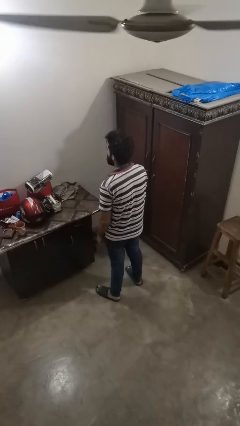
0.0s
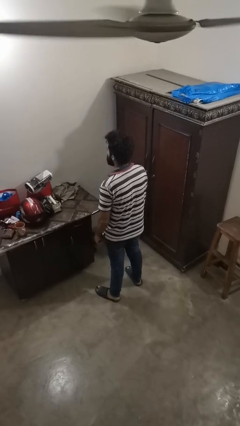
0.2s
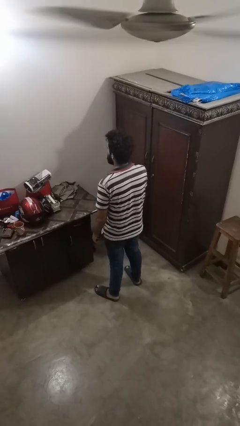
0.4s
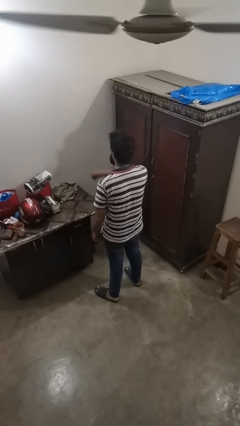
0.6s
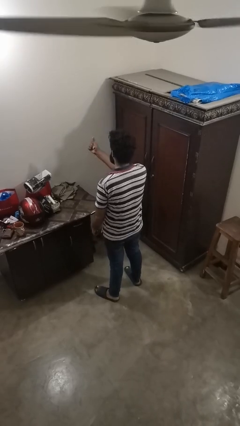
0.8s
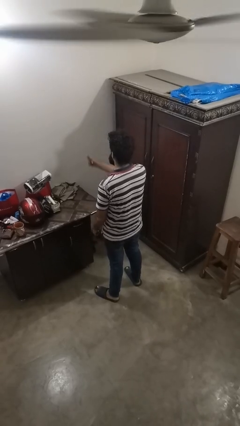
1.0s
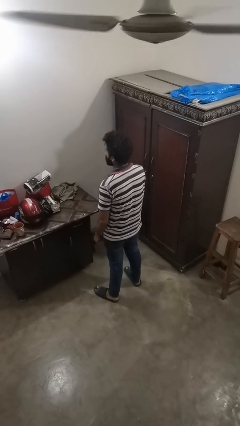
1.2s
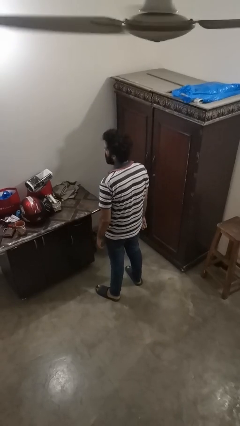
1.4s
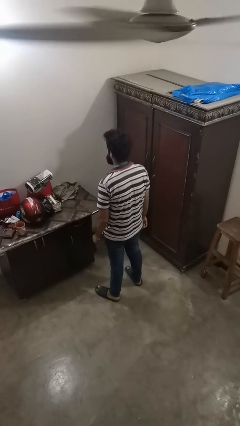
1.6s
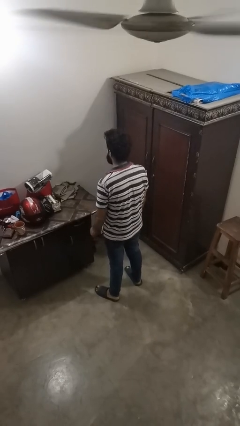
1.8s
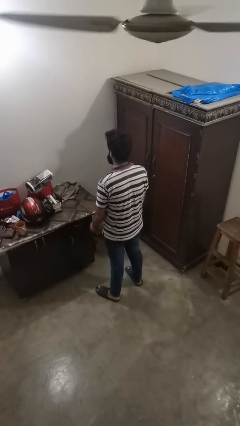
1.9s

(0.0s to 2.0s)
person snaps fingers

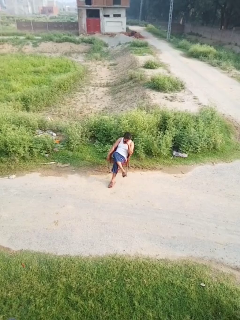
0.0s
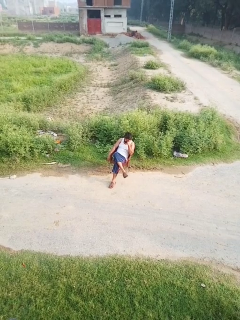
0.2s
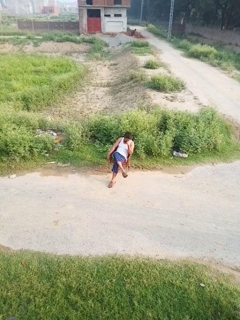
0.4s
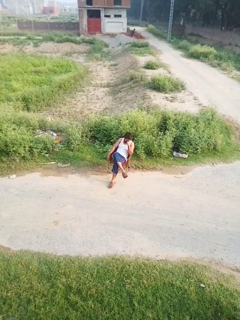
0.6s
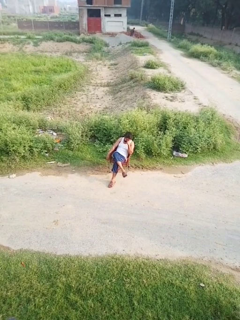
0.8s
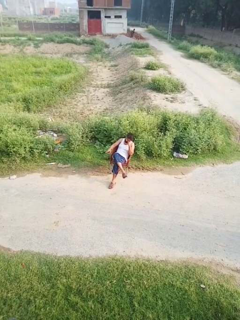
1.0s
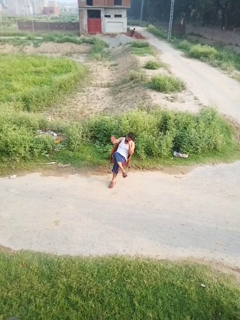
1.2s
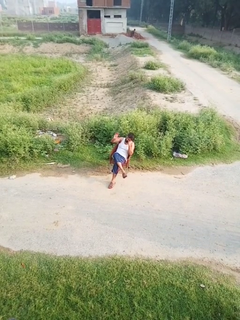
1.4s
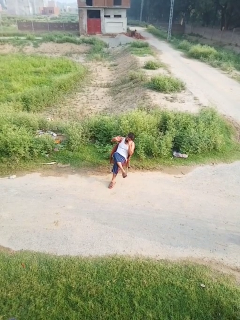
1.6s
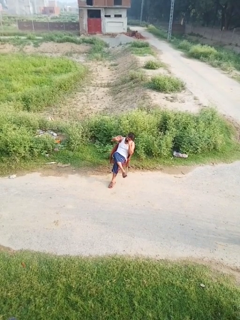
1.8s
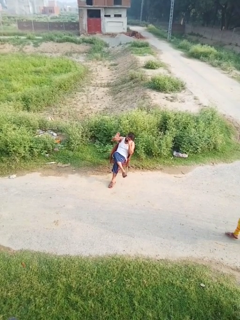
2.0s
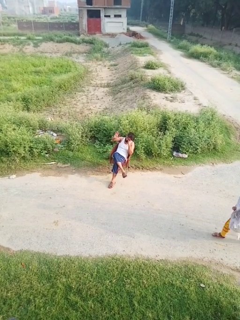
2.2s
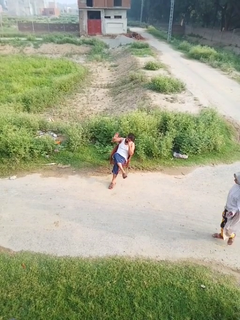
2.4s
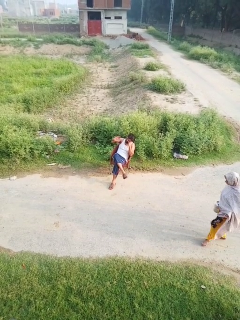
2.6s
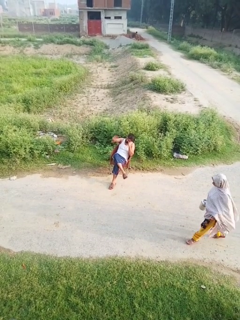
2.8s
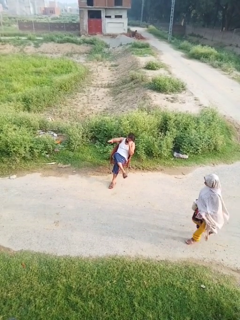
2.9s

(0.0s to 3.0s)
person waves at person

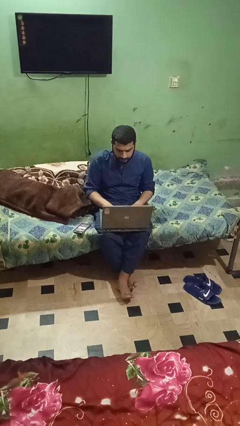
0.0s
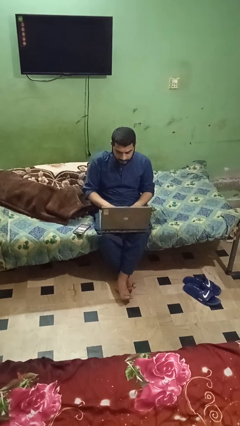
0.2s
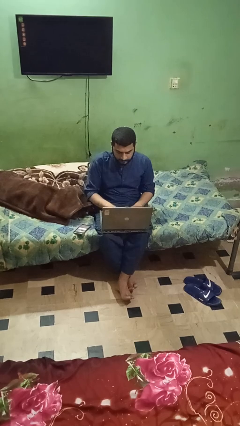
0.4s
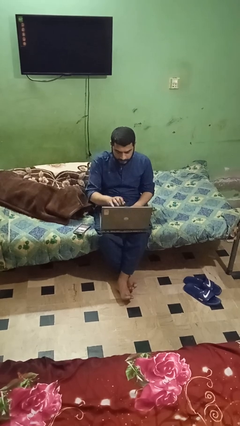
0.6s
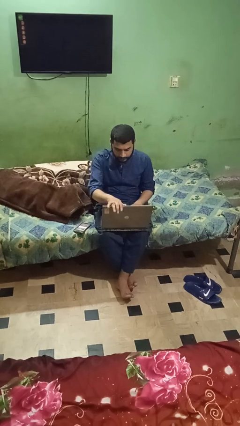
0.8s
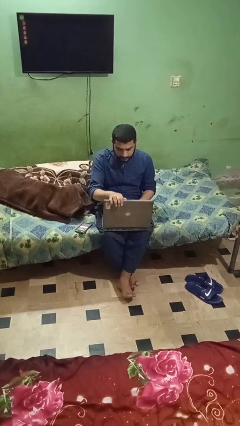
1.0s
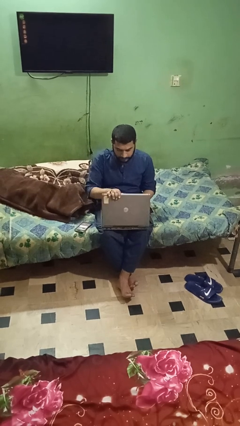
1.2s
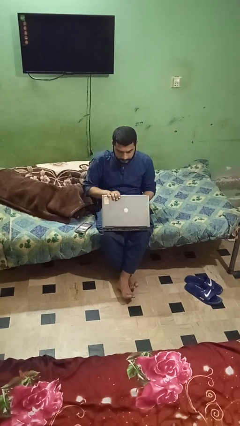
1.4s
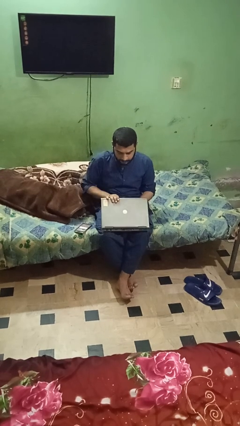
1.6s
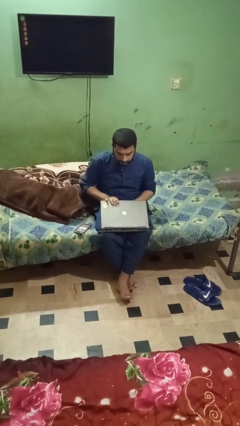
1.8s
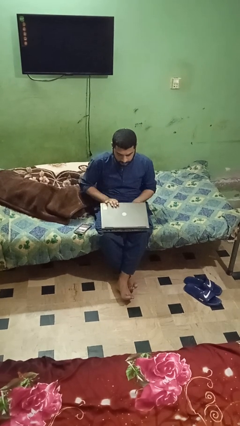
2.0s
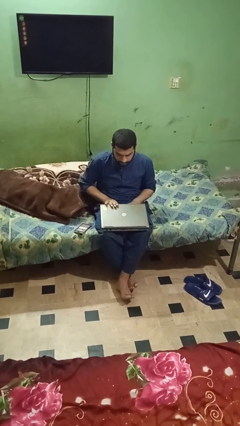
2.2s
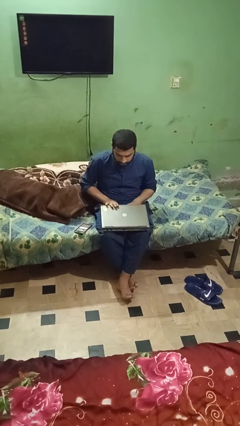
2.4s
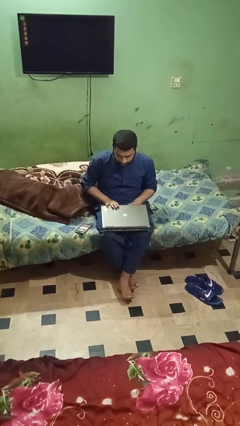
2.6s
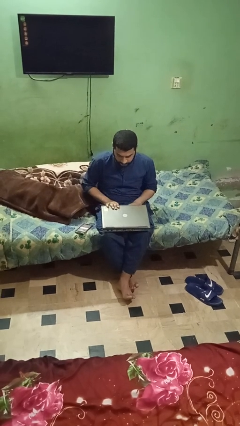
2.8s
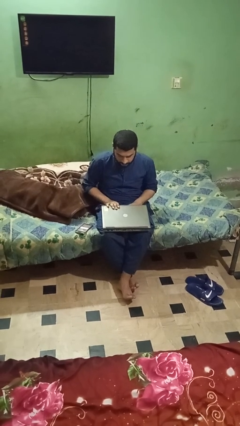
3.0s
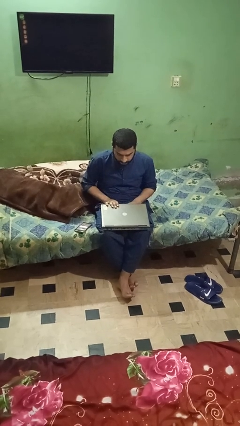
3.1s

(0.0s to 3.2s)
person closes laptop

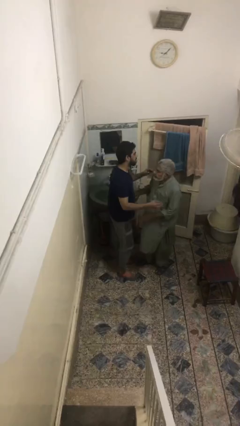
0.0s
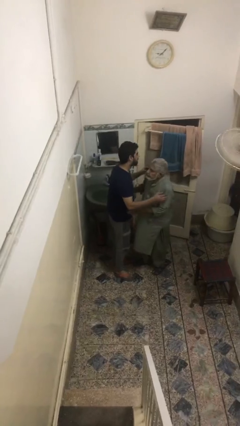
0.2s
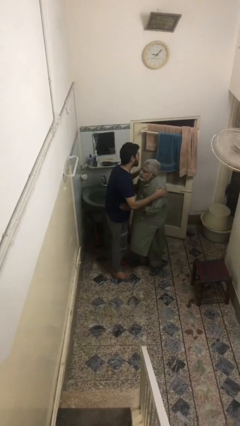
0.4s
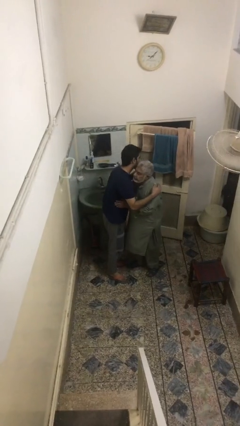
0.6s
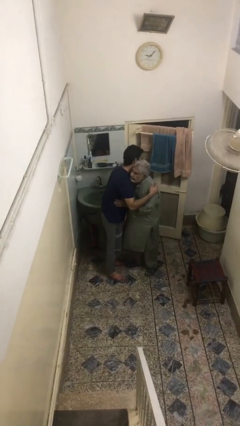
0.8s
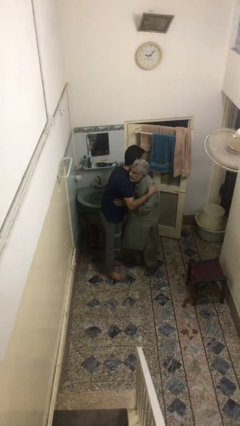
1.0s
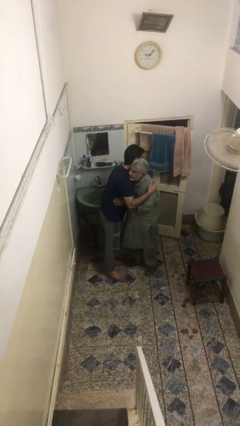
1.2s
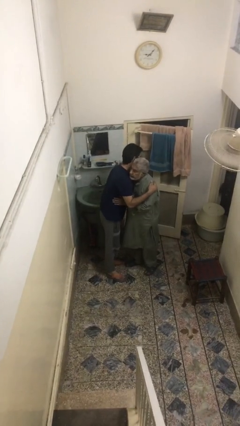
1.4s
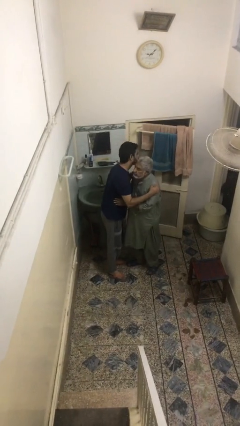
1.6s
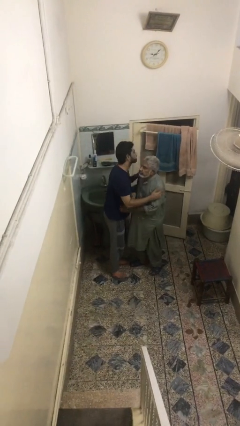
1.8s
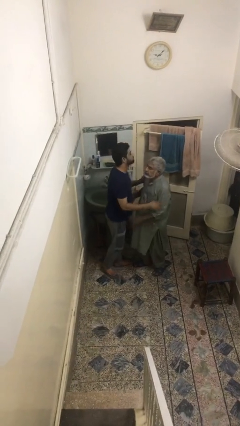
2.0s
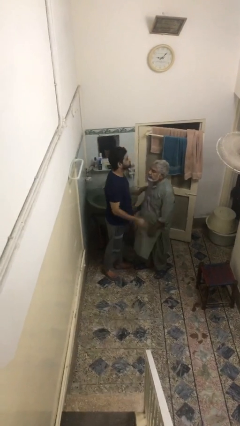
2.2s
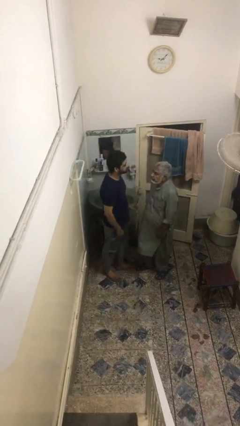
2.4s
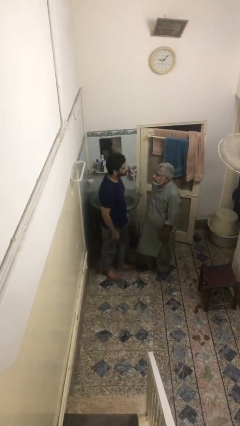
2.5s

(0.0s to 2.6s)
person embraces person

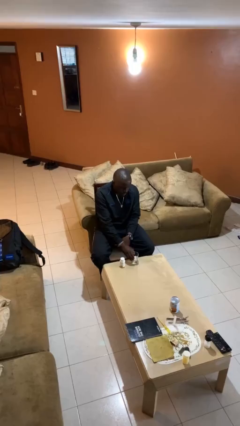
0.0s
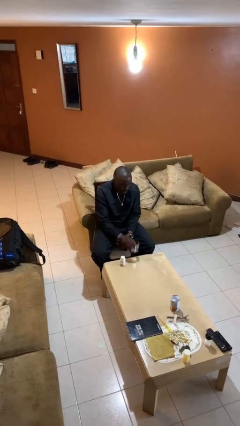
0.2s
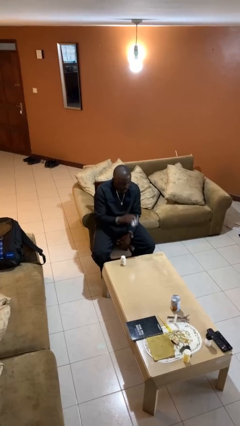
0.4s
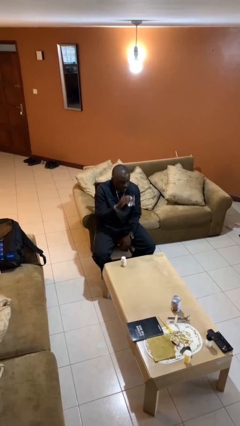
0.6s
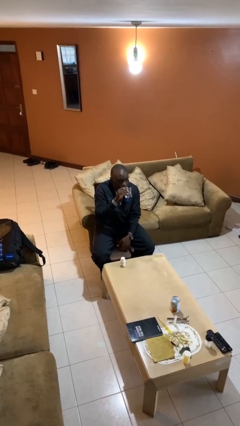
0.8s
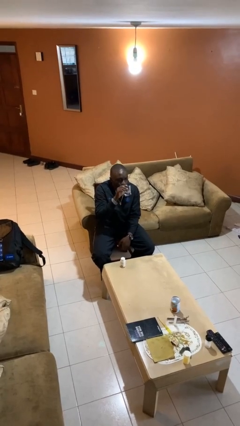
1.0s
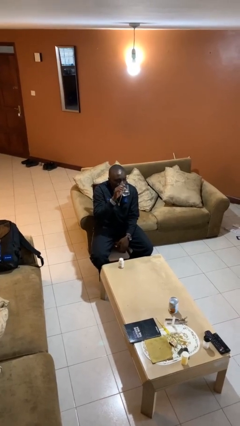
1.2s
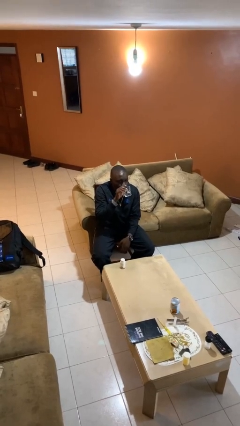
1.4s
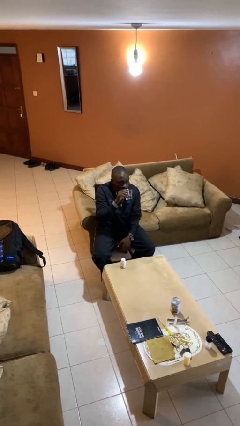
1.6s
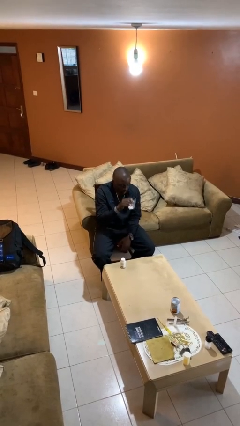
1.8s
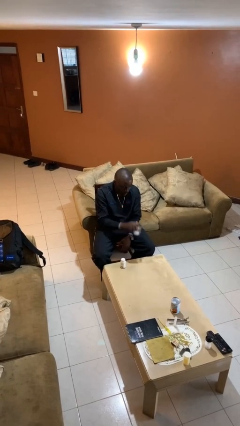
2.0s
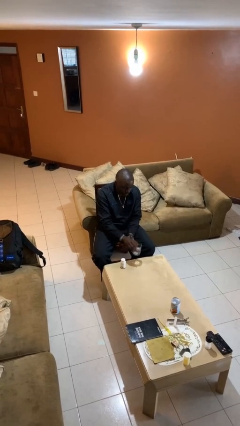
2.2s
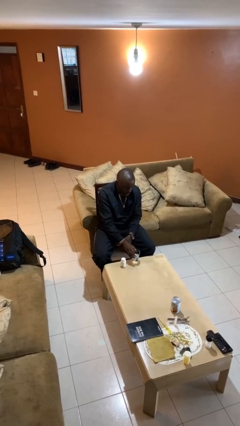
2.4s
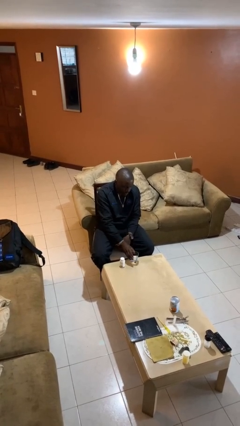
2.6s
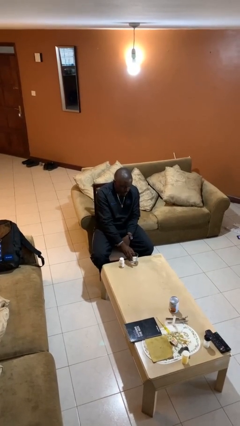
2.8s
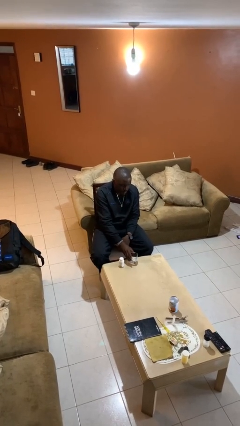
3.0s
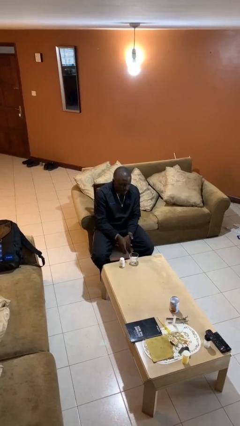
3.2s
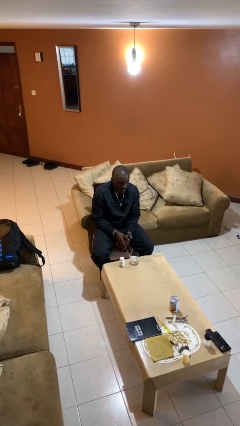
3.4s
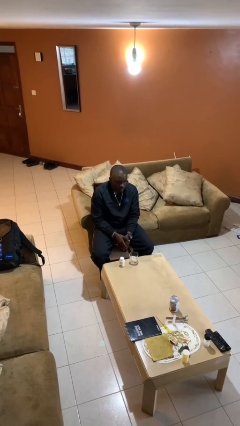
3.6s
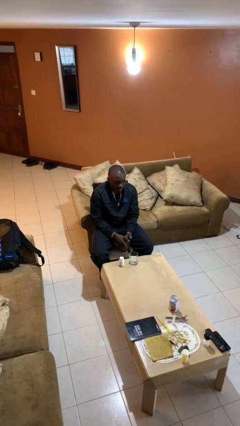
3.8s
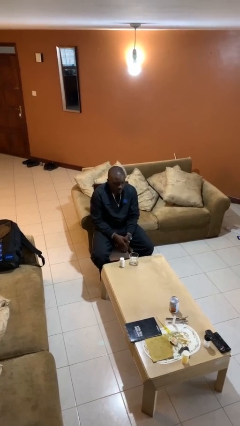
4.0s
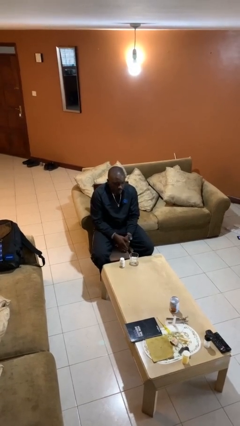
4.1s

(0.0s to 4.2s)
person drinks from cup

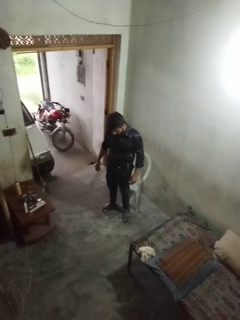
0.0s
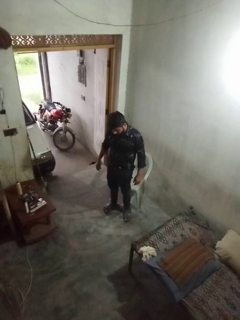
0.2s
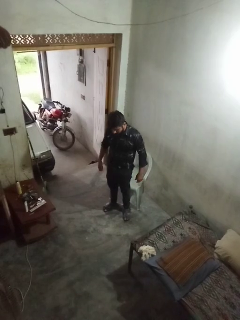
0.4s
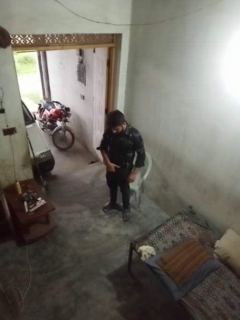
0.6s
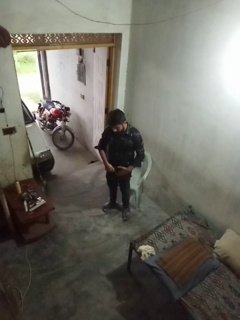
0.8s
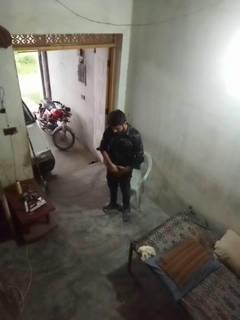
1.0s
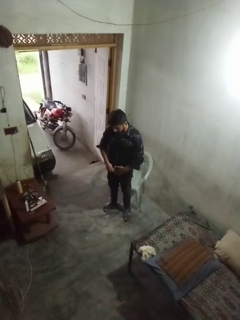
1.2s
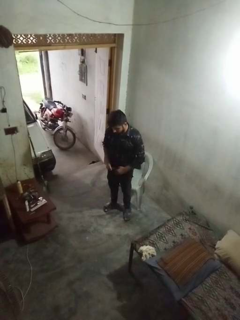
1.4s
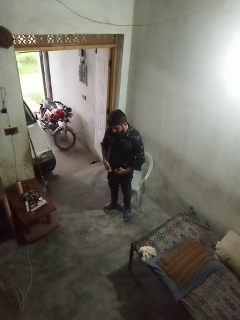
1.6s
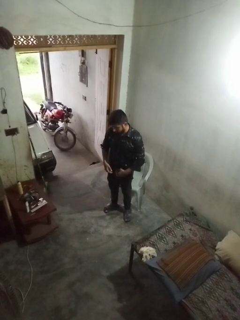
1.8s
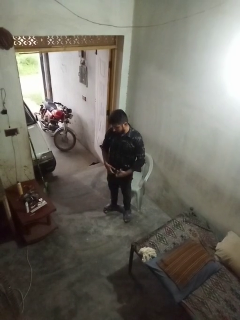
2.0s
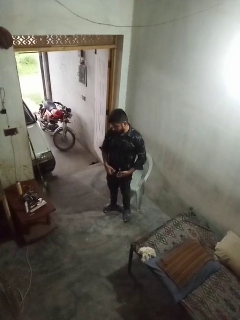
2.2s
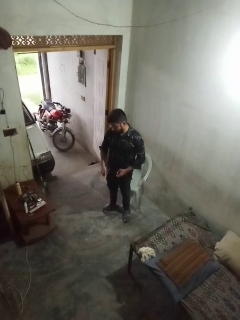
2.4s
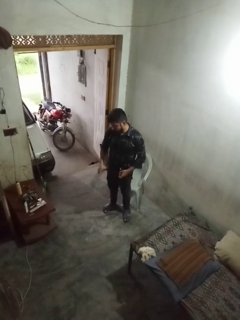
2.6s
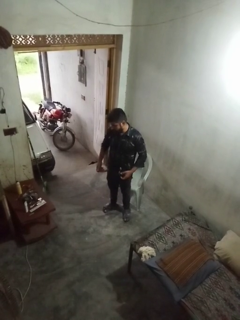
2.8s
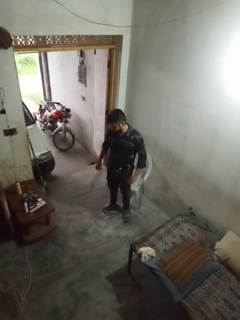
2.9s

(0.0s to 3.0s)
person takes off belt

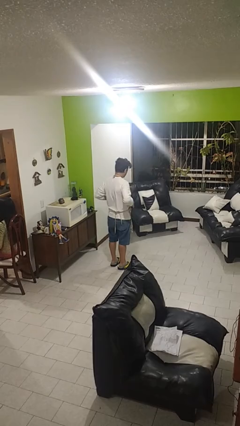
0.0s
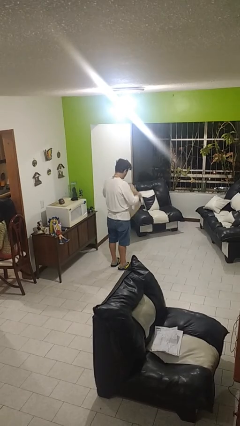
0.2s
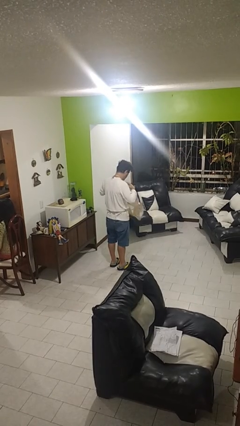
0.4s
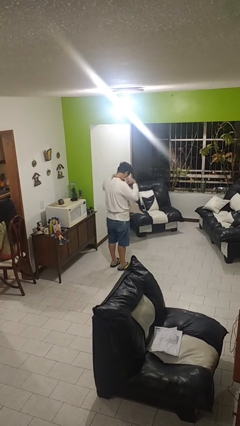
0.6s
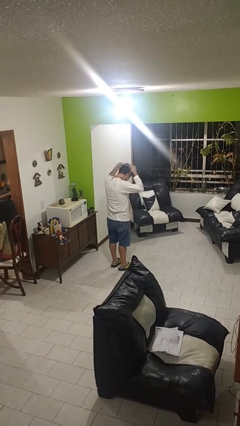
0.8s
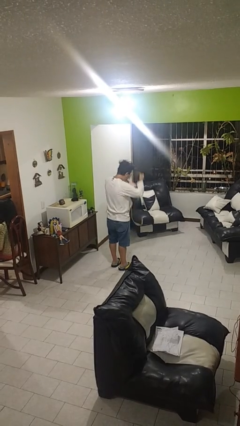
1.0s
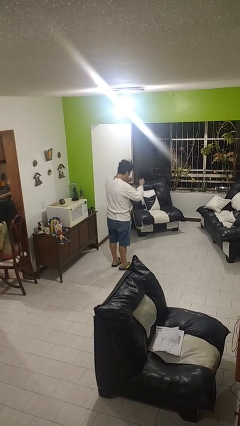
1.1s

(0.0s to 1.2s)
person takes off apron
